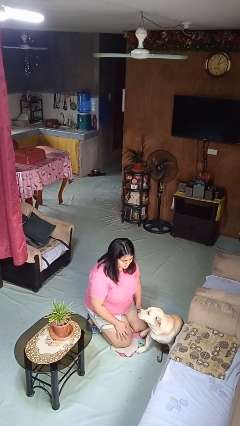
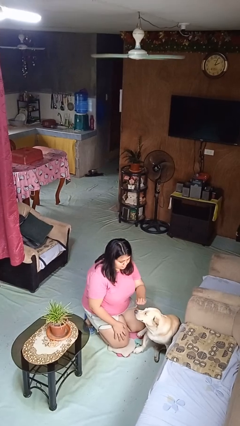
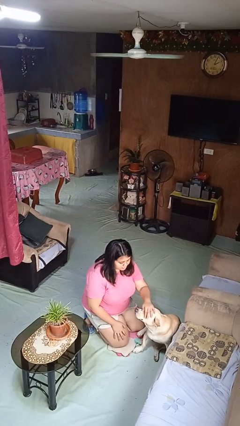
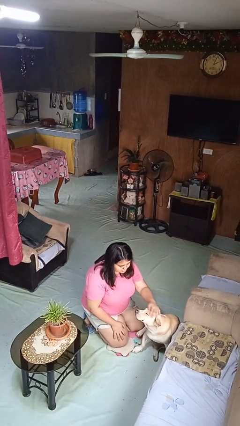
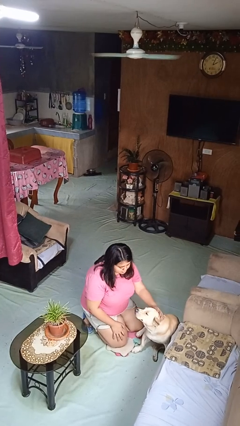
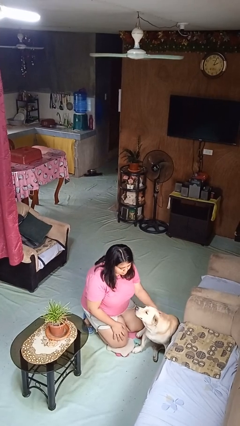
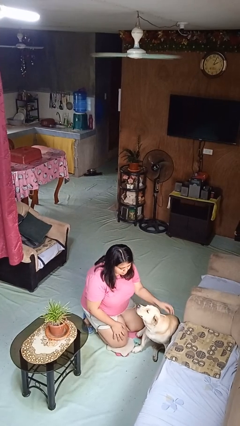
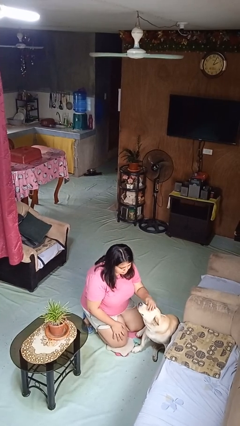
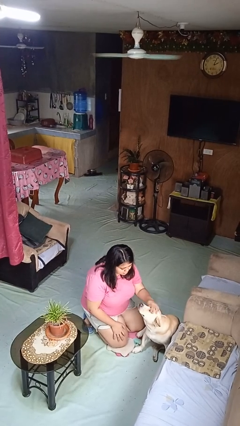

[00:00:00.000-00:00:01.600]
person pets dog

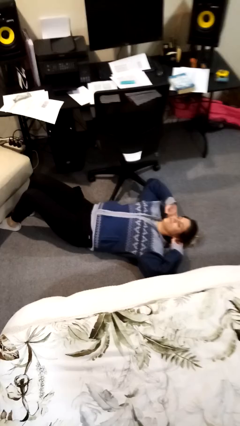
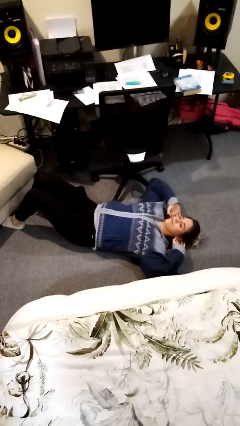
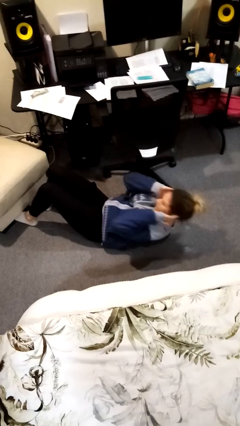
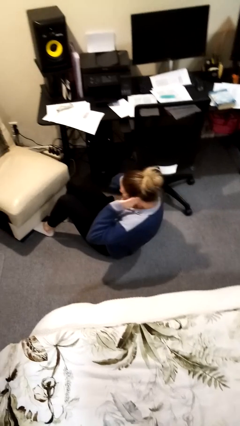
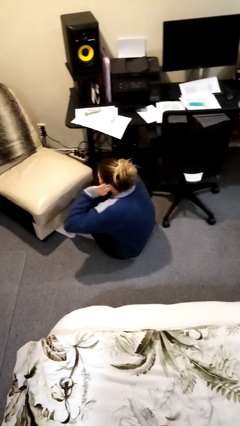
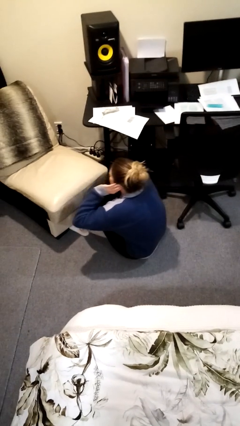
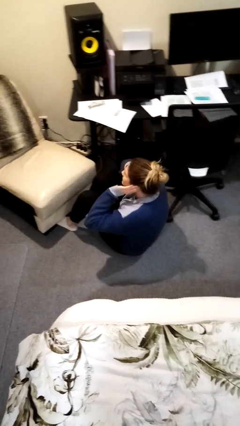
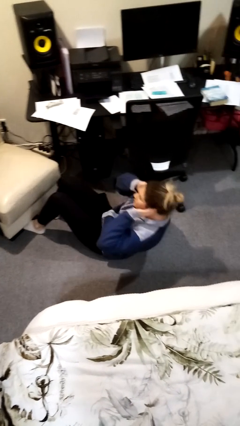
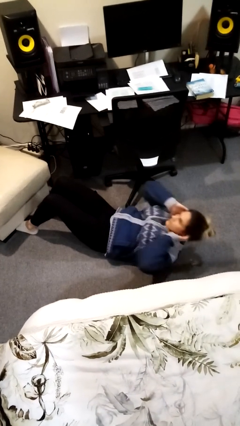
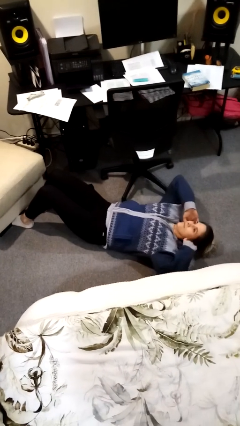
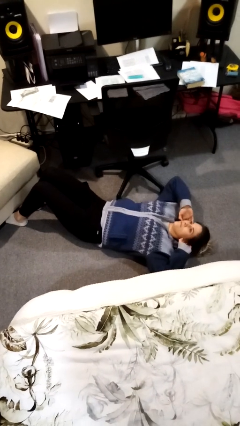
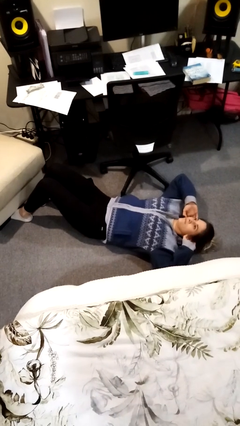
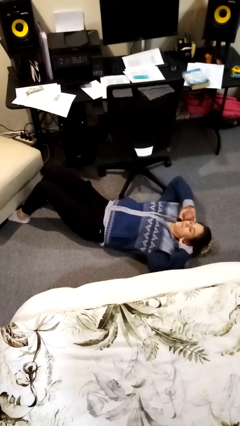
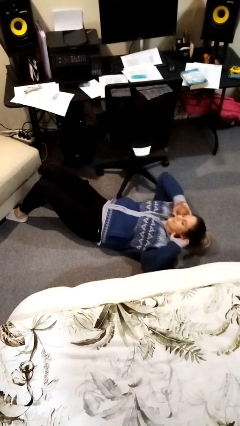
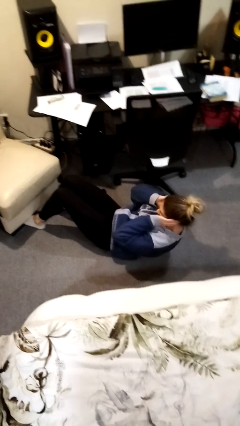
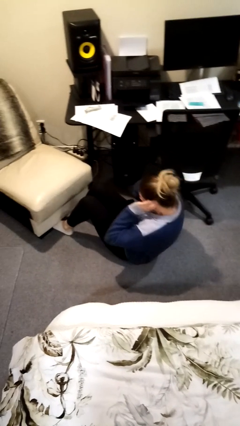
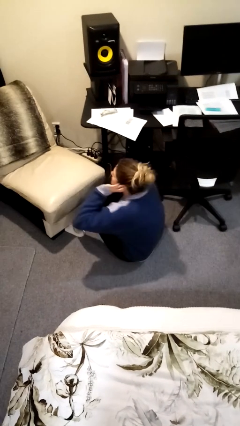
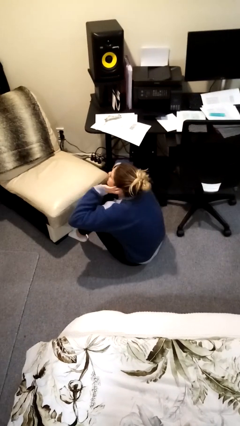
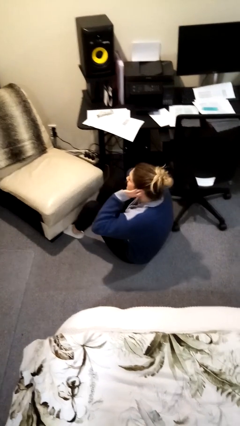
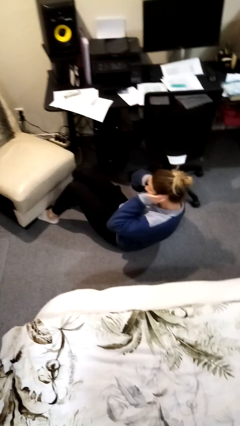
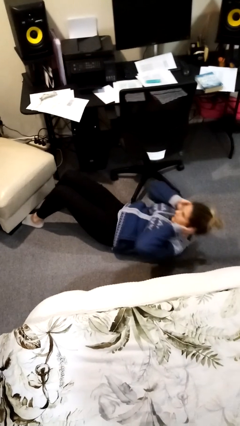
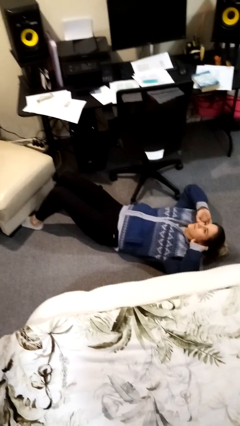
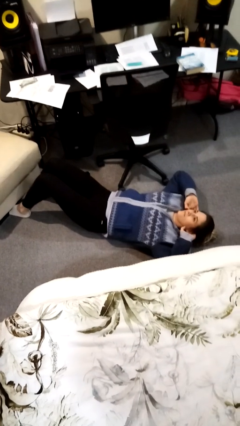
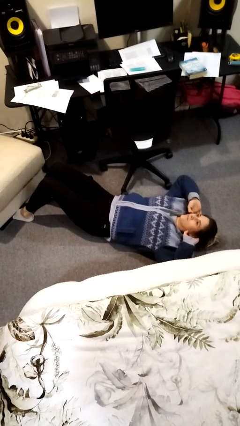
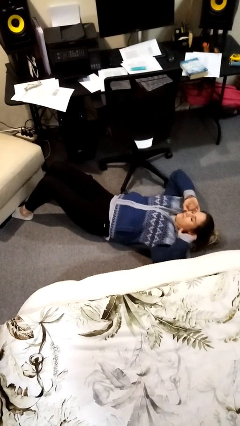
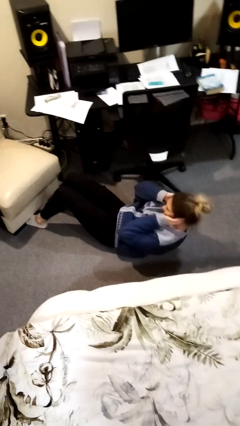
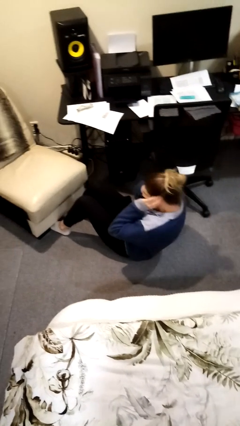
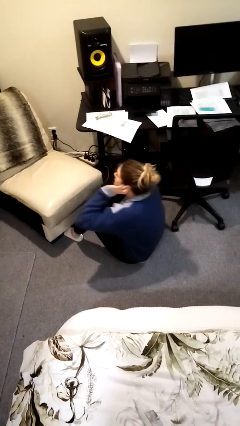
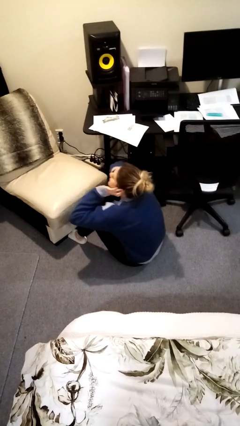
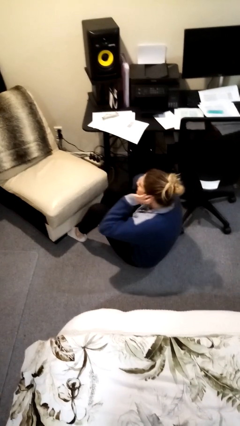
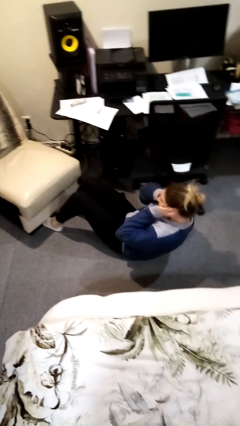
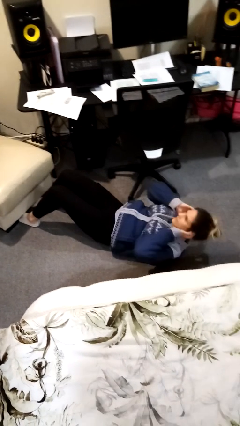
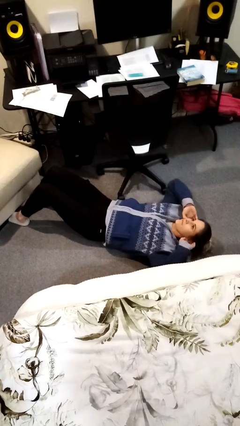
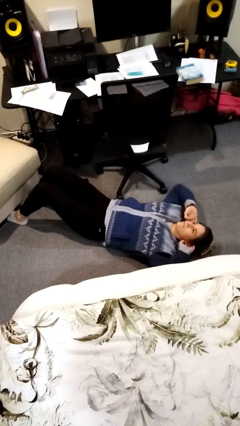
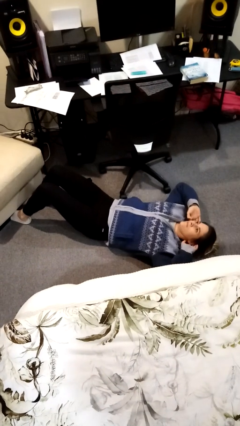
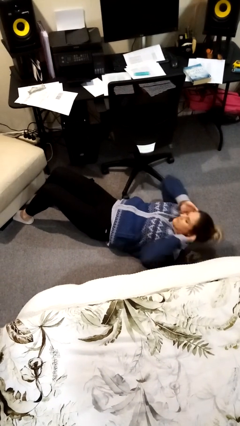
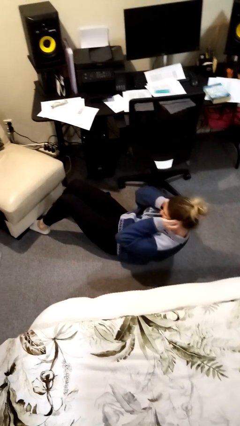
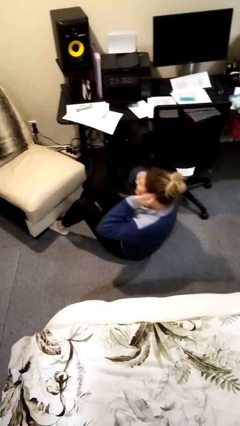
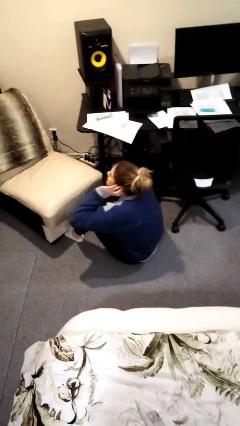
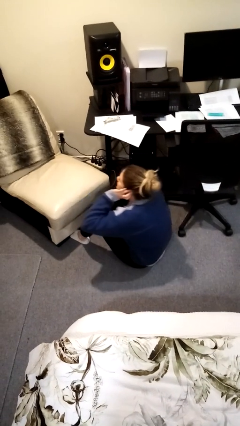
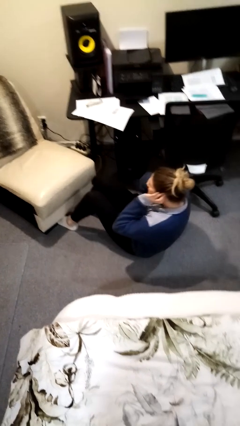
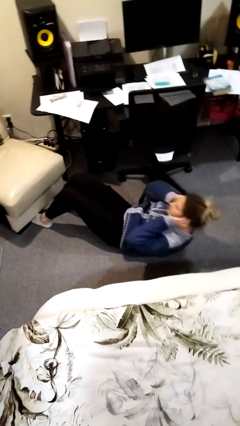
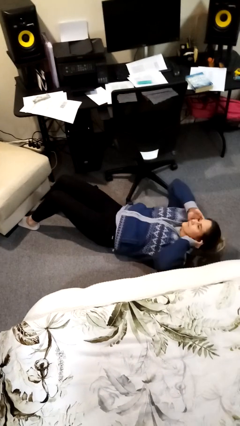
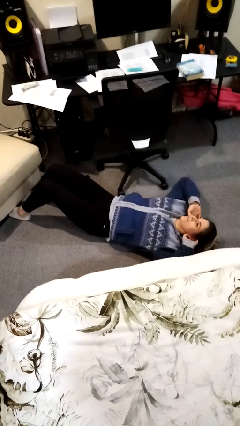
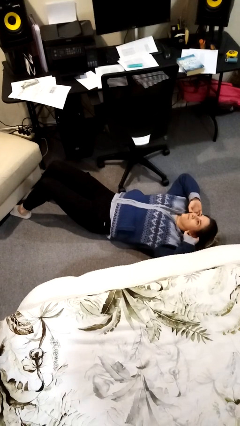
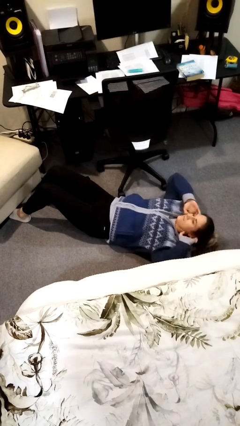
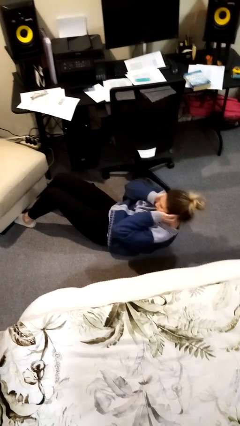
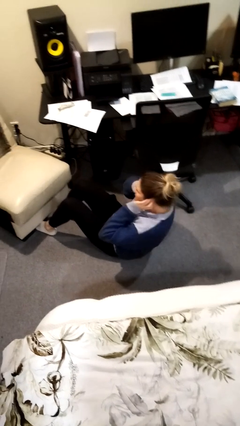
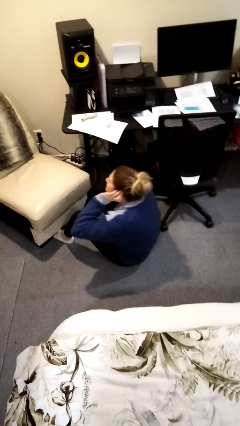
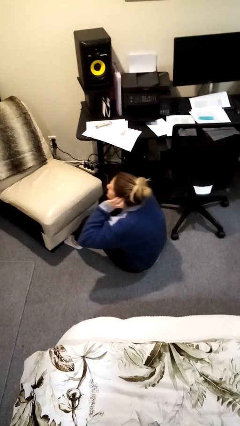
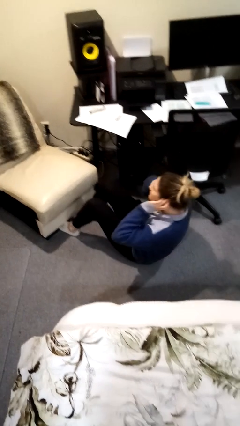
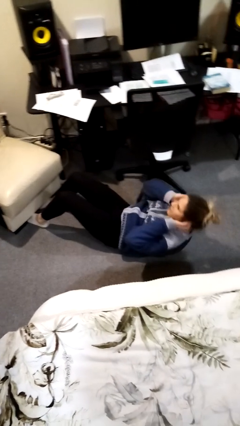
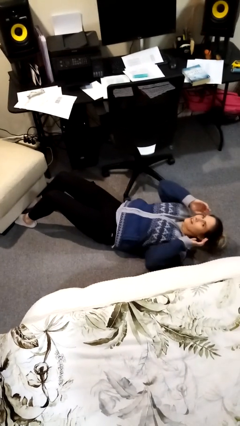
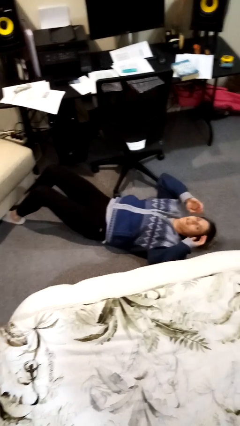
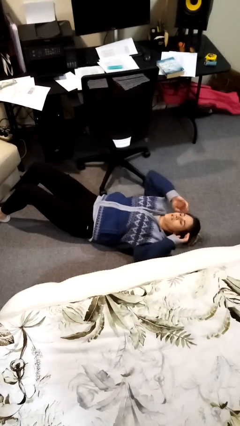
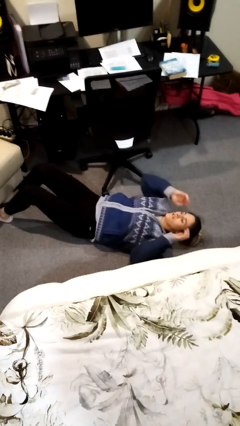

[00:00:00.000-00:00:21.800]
person exercises with situp

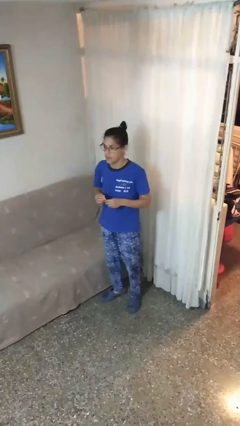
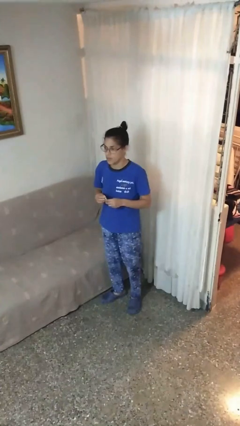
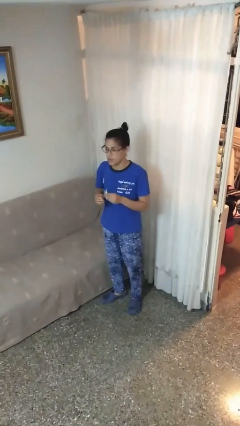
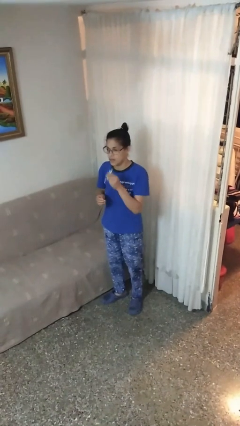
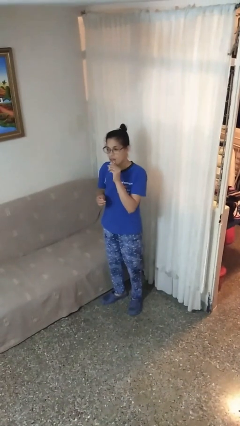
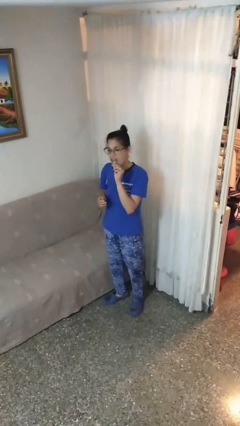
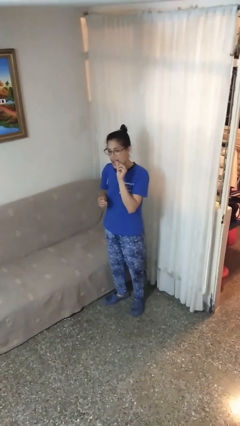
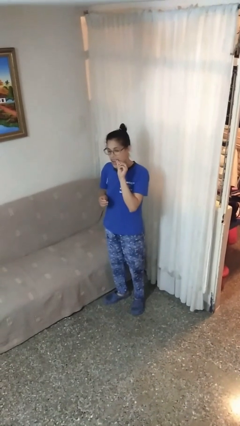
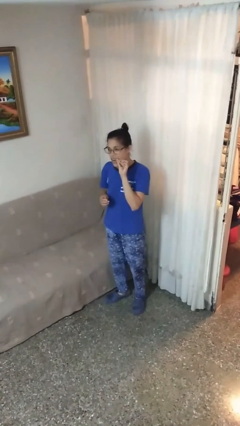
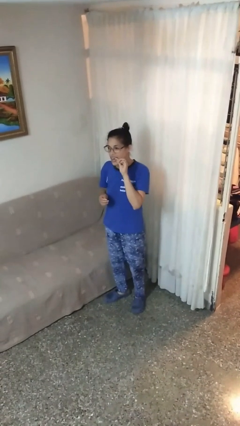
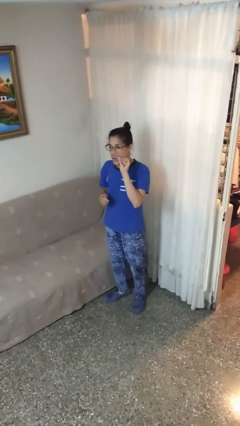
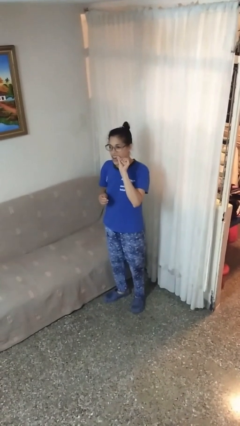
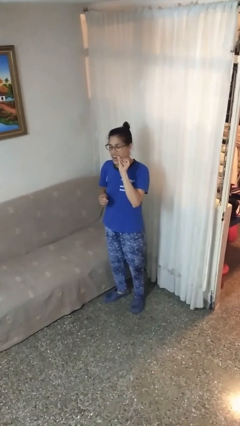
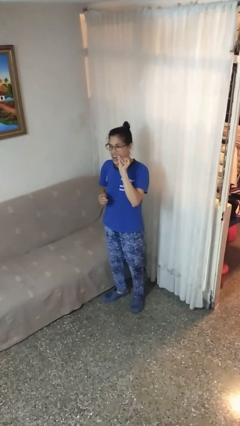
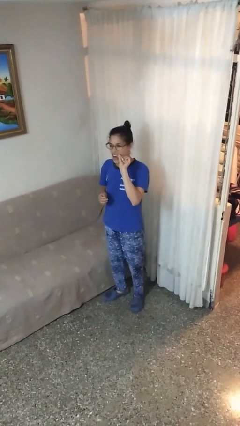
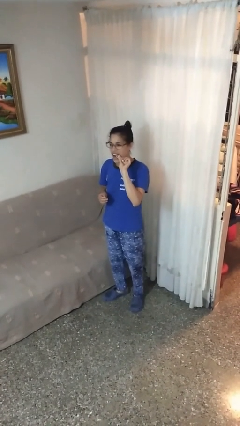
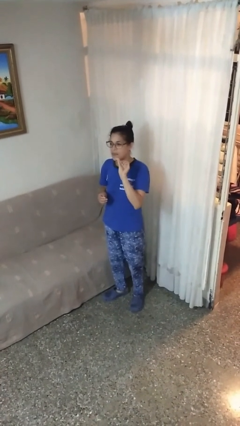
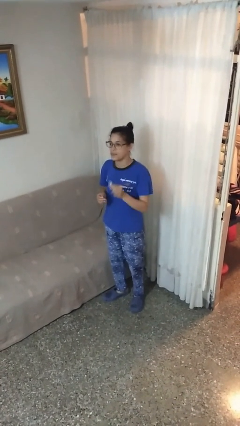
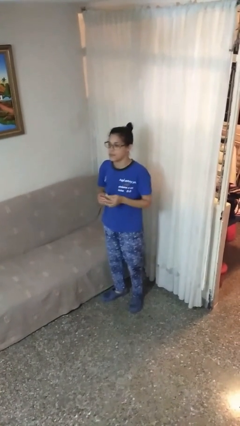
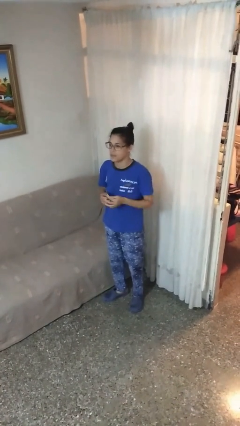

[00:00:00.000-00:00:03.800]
person flosses

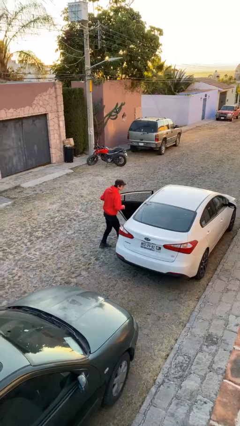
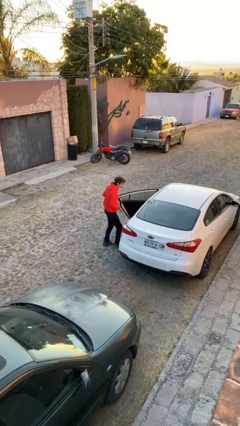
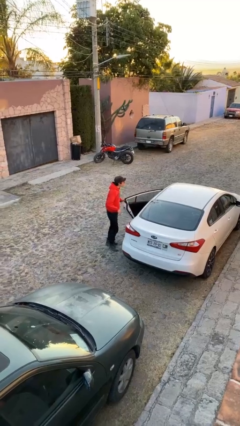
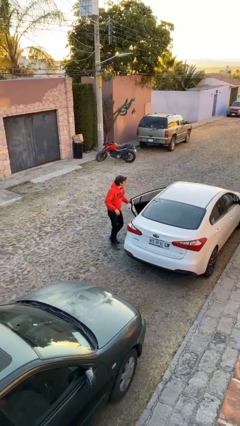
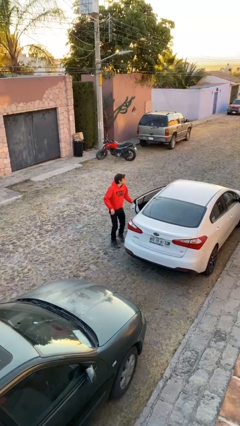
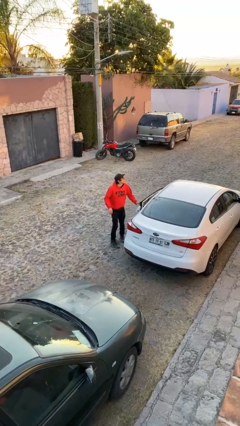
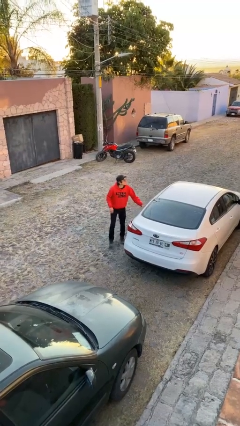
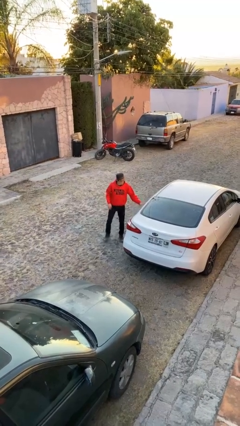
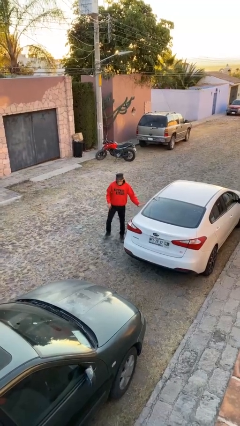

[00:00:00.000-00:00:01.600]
person closes facility door
